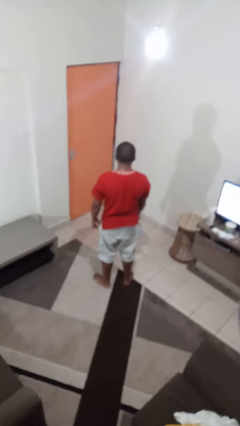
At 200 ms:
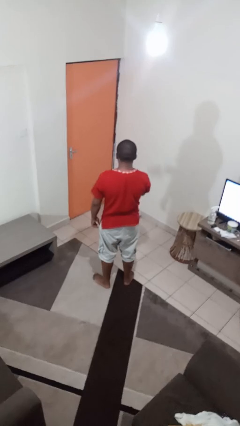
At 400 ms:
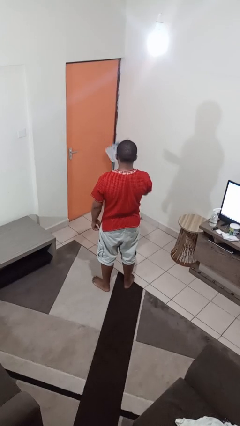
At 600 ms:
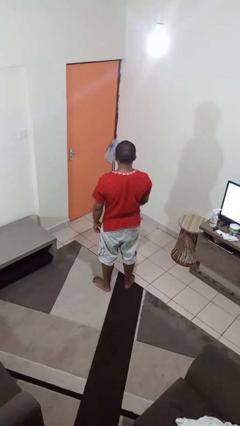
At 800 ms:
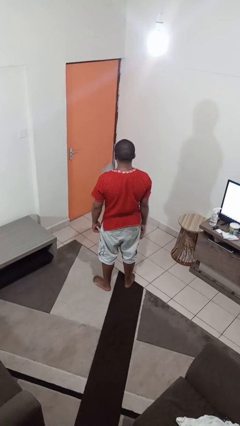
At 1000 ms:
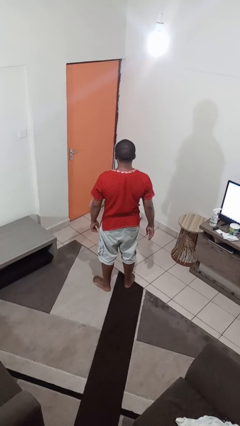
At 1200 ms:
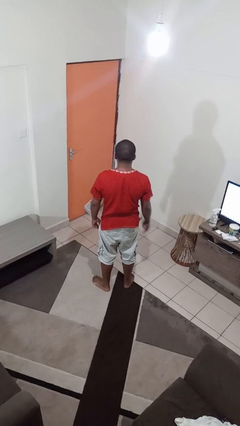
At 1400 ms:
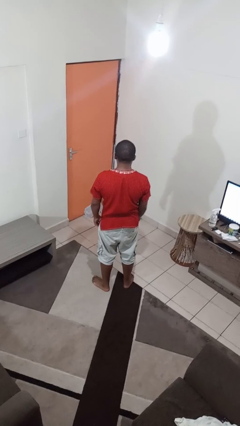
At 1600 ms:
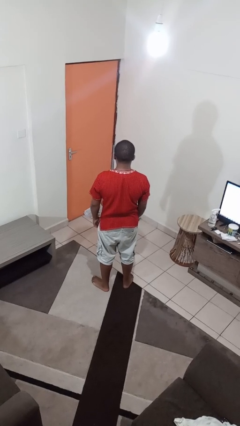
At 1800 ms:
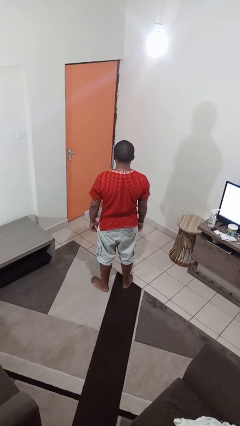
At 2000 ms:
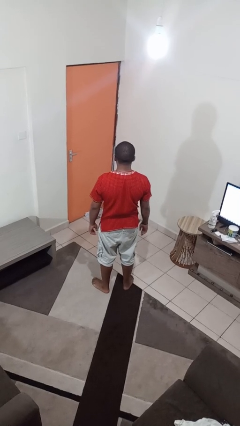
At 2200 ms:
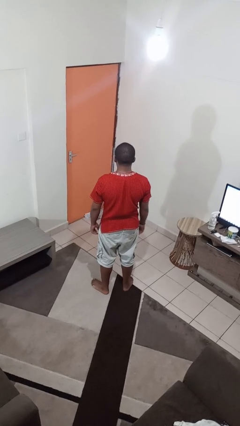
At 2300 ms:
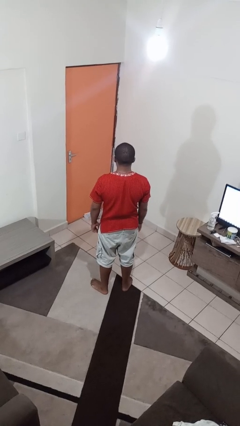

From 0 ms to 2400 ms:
person throws object to ground

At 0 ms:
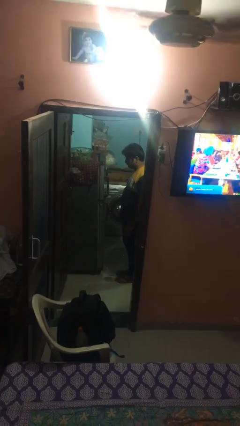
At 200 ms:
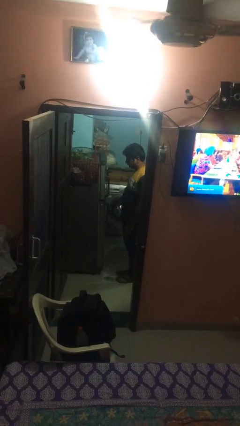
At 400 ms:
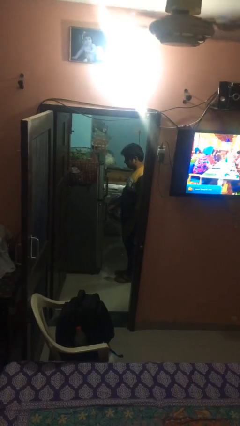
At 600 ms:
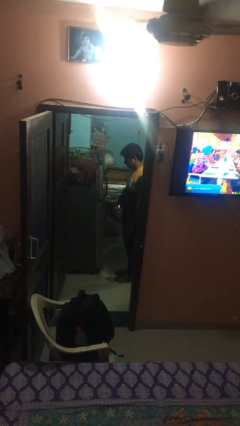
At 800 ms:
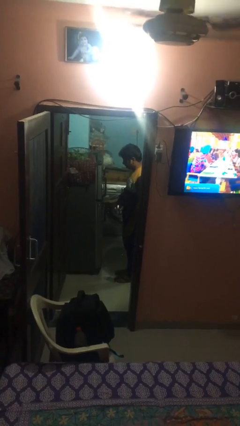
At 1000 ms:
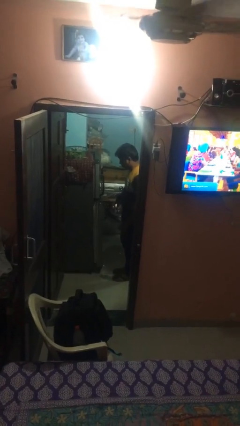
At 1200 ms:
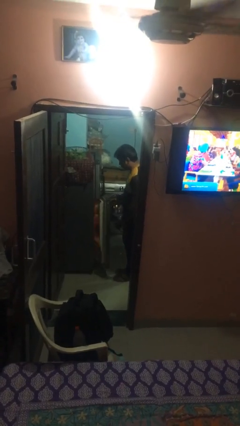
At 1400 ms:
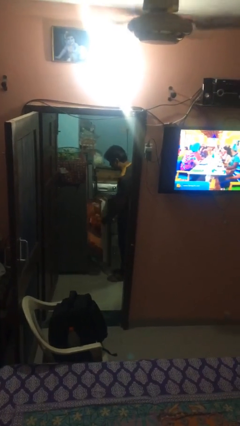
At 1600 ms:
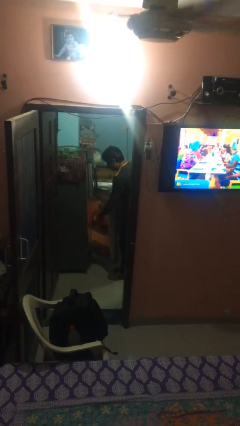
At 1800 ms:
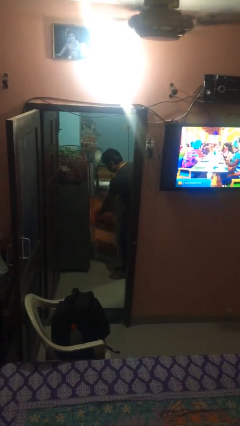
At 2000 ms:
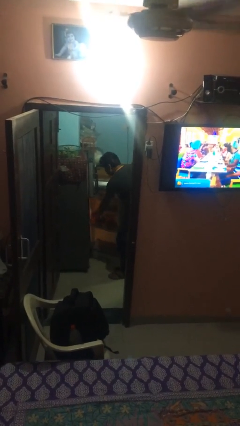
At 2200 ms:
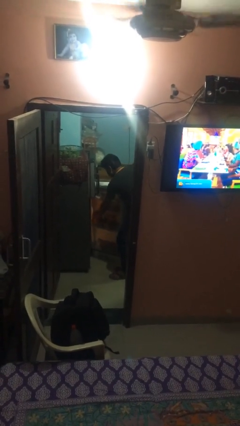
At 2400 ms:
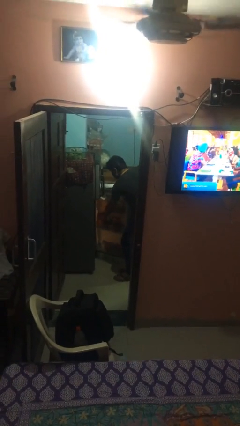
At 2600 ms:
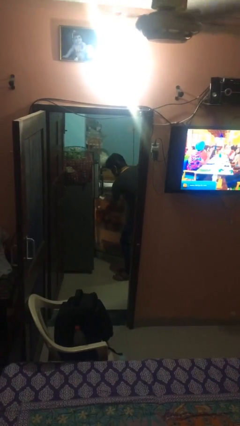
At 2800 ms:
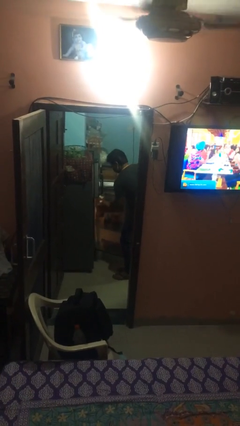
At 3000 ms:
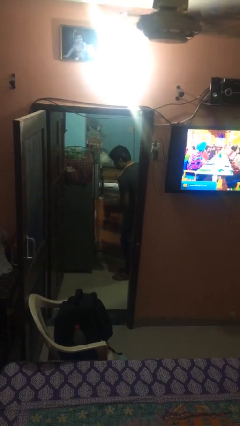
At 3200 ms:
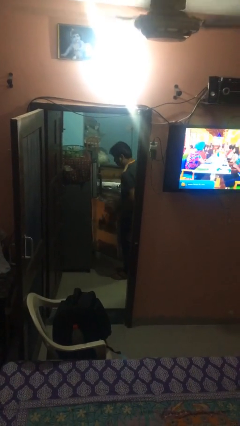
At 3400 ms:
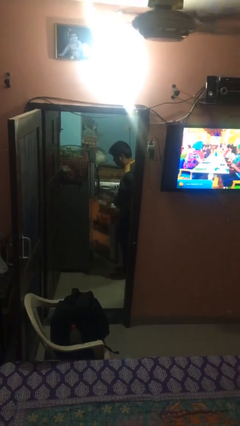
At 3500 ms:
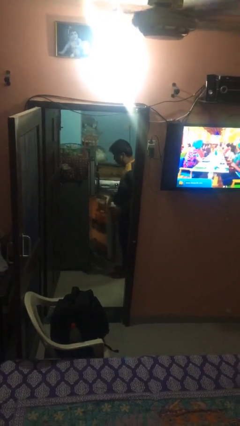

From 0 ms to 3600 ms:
person takes object from refrigerator

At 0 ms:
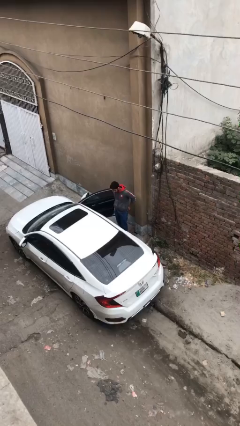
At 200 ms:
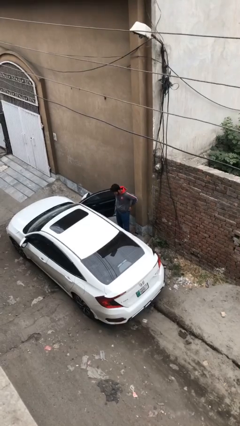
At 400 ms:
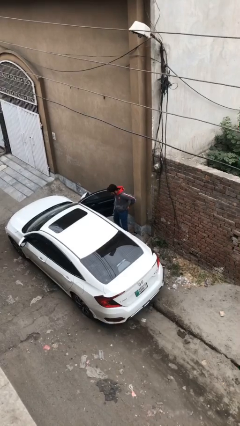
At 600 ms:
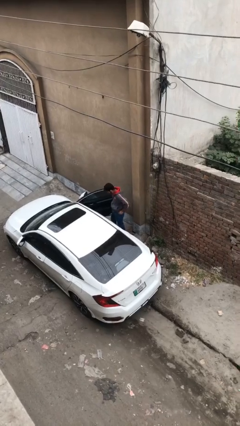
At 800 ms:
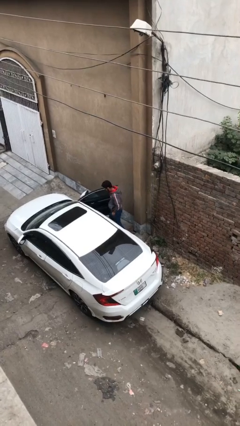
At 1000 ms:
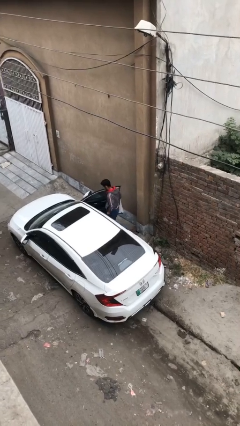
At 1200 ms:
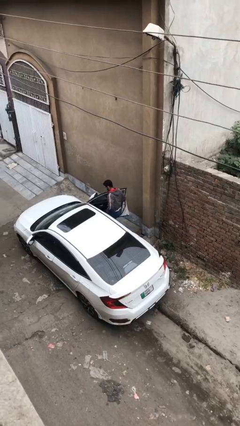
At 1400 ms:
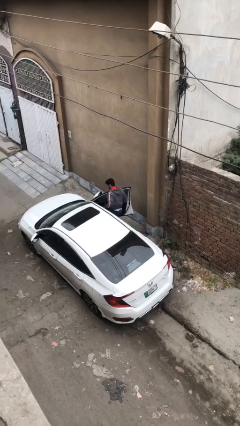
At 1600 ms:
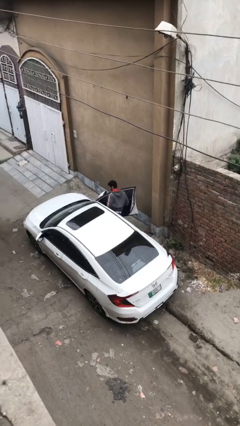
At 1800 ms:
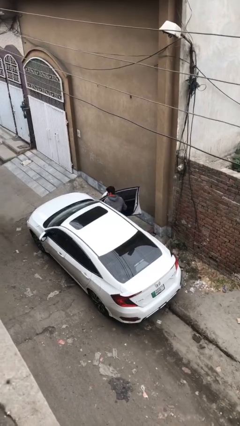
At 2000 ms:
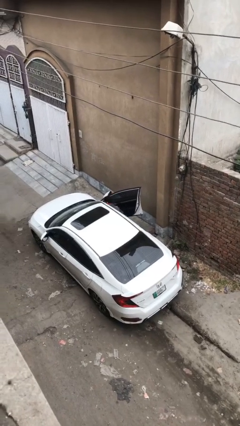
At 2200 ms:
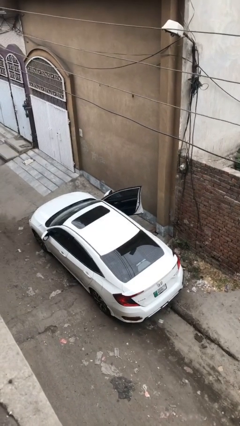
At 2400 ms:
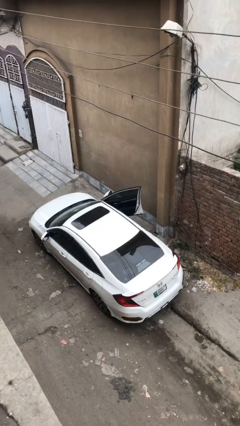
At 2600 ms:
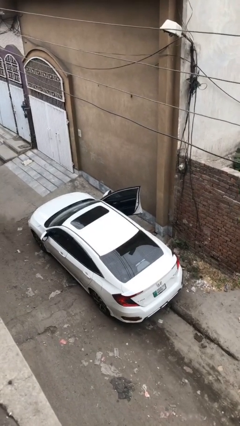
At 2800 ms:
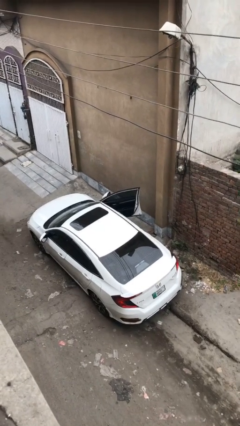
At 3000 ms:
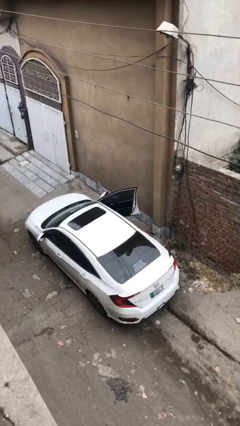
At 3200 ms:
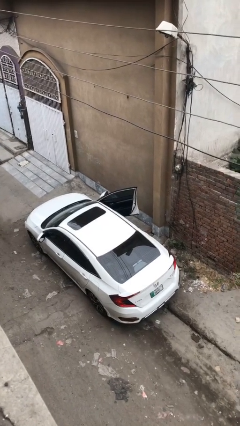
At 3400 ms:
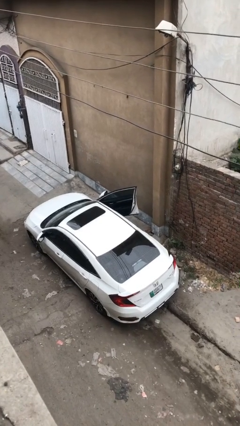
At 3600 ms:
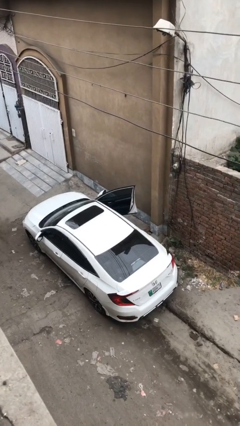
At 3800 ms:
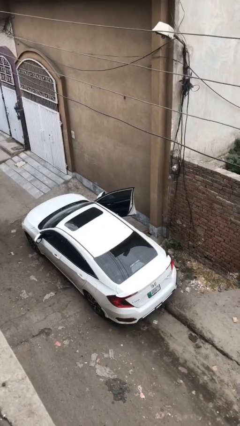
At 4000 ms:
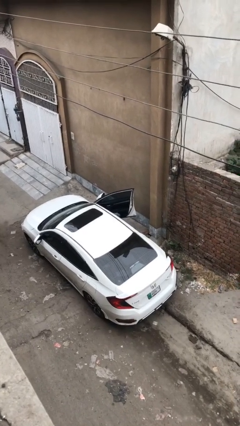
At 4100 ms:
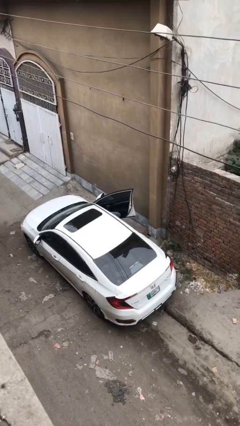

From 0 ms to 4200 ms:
person enters car

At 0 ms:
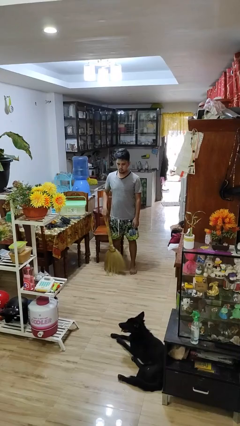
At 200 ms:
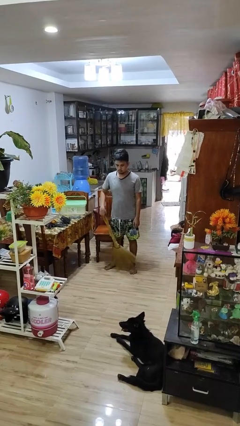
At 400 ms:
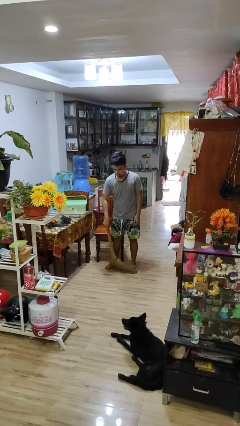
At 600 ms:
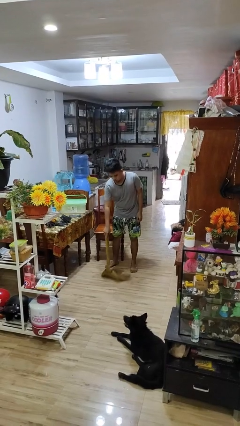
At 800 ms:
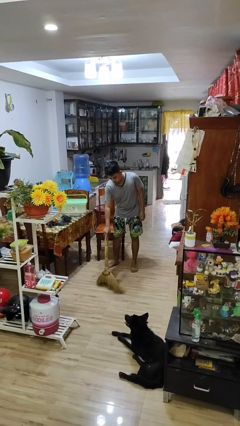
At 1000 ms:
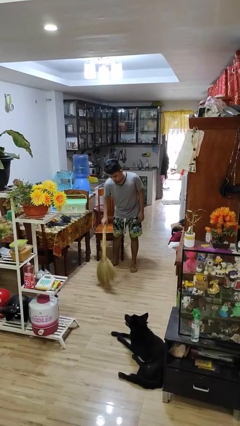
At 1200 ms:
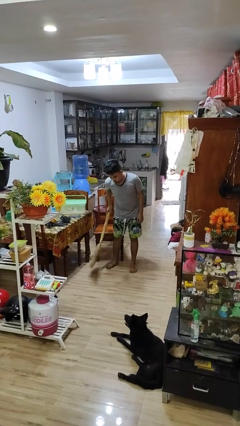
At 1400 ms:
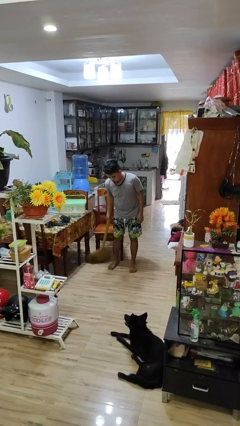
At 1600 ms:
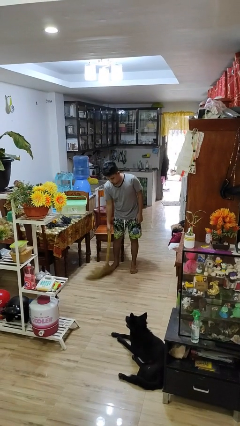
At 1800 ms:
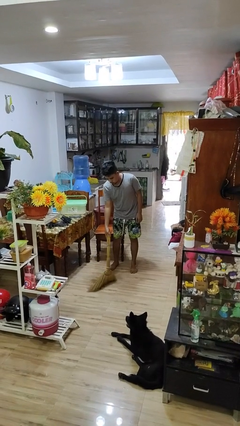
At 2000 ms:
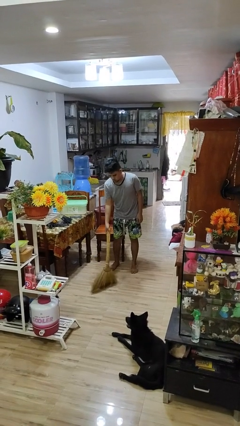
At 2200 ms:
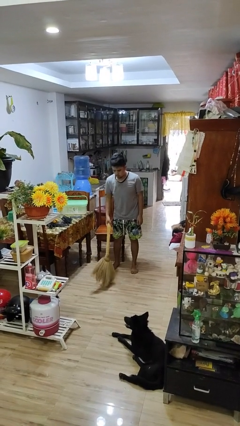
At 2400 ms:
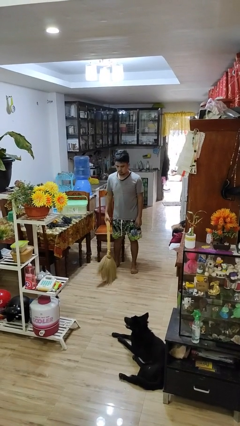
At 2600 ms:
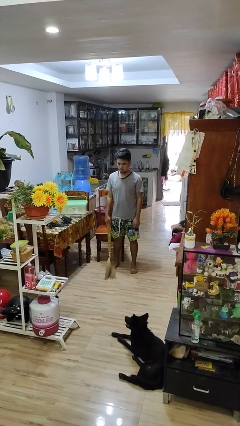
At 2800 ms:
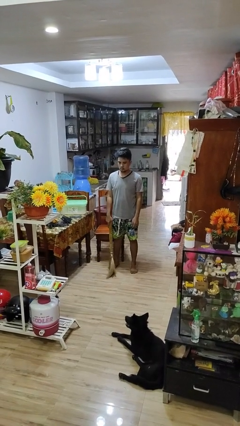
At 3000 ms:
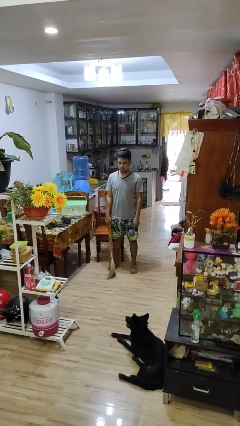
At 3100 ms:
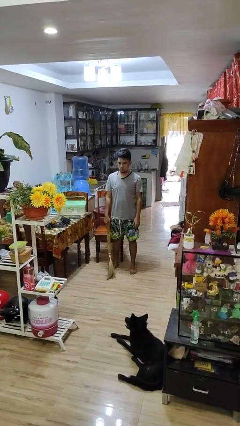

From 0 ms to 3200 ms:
person sweeps floor

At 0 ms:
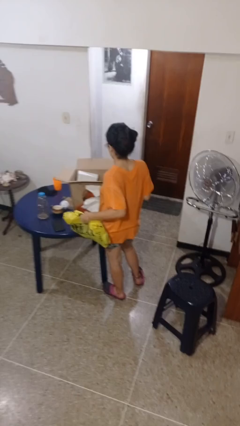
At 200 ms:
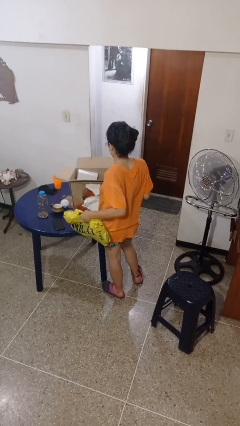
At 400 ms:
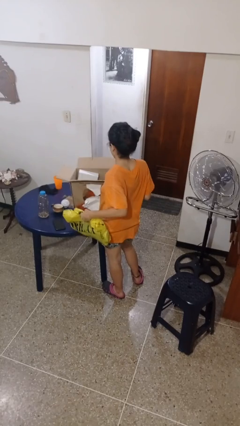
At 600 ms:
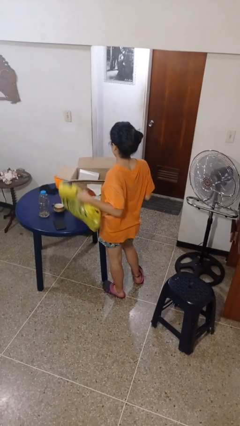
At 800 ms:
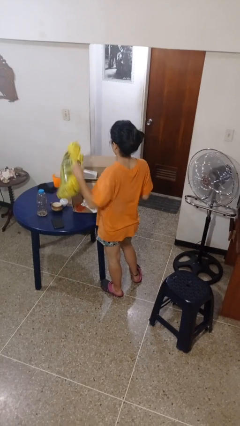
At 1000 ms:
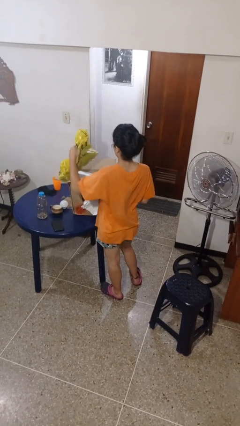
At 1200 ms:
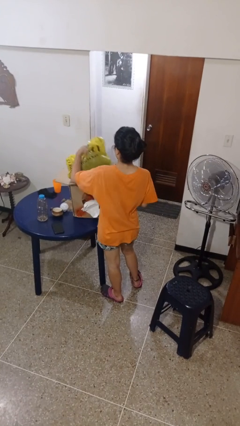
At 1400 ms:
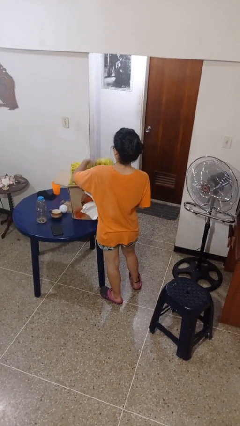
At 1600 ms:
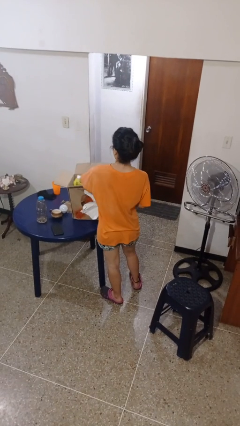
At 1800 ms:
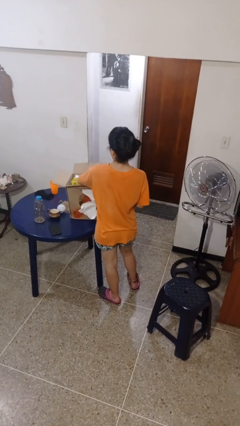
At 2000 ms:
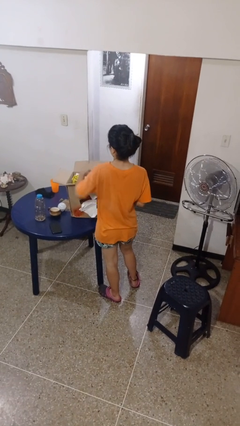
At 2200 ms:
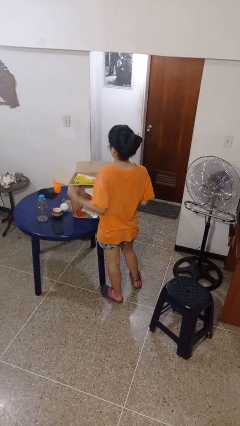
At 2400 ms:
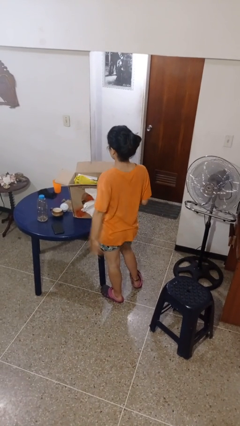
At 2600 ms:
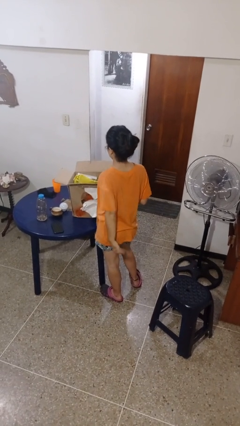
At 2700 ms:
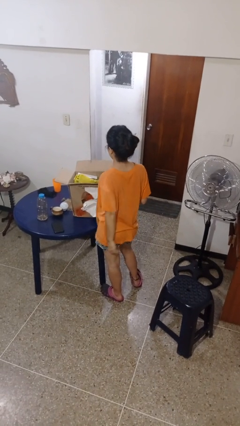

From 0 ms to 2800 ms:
person puts object into box

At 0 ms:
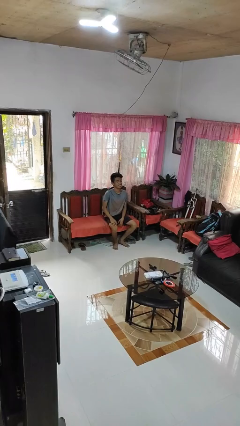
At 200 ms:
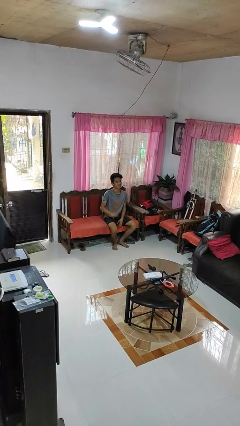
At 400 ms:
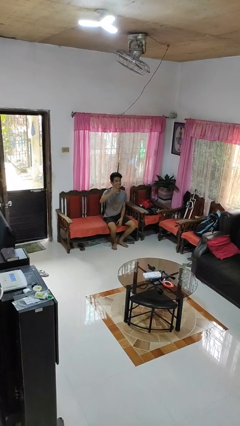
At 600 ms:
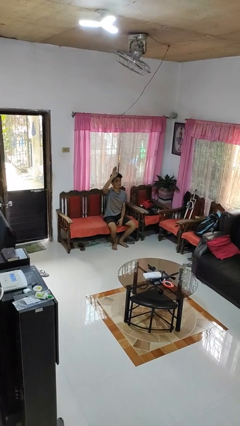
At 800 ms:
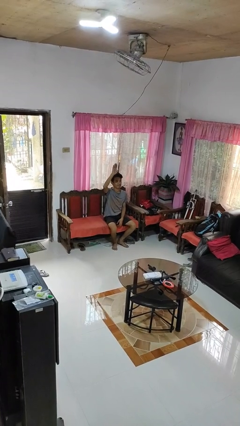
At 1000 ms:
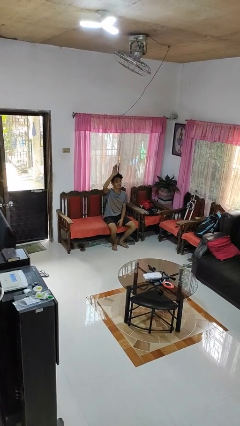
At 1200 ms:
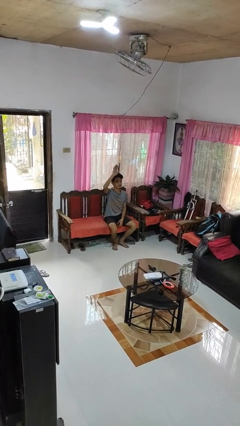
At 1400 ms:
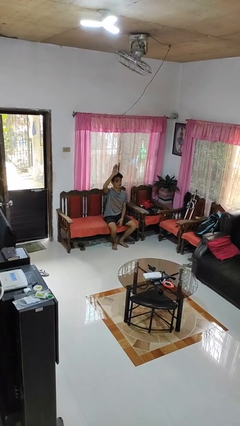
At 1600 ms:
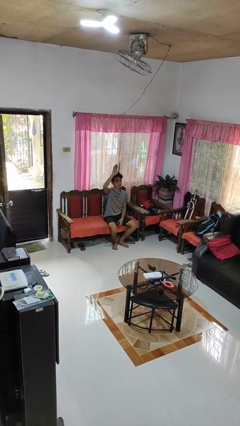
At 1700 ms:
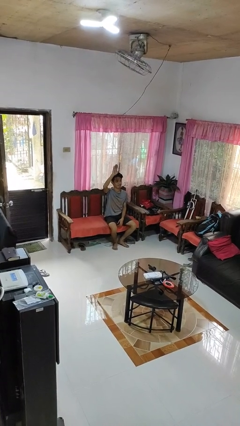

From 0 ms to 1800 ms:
person gestures raise hand
